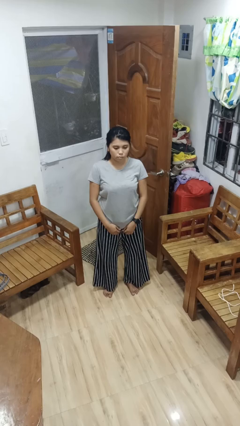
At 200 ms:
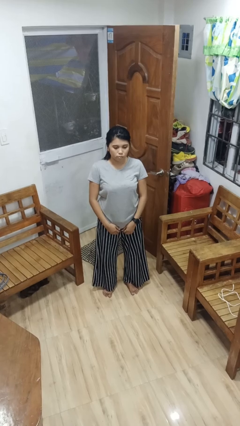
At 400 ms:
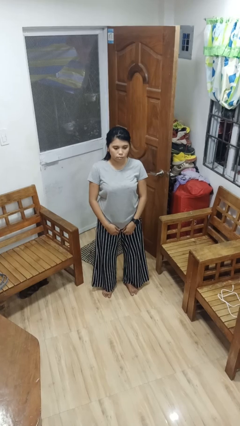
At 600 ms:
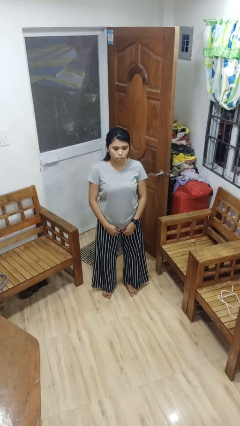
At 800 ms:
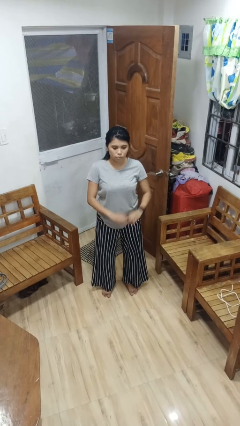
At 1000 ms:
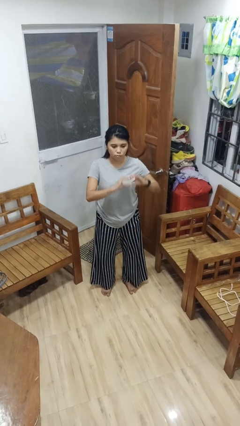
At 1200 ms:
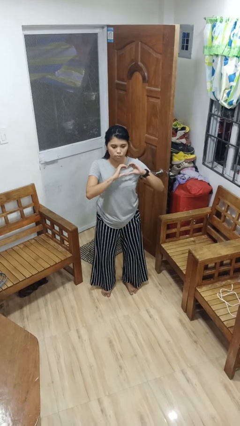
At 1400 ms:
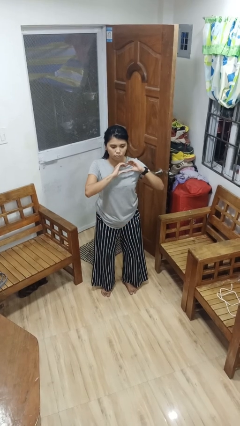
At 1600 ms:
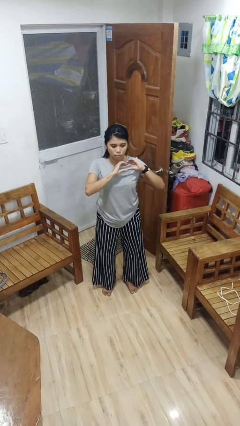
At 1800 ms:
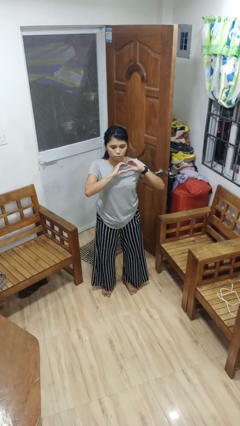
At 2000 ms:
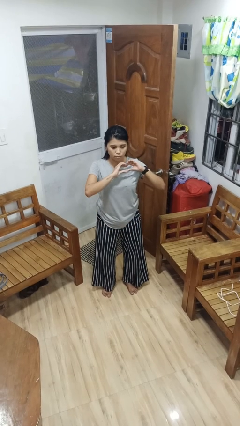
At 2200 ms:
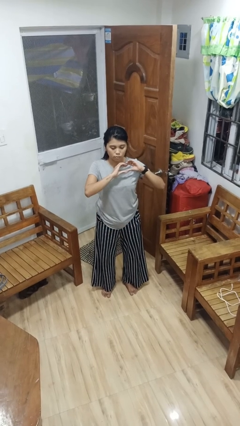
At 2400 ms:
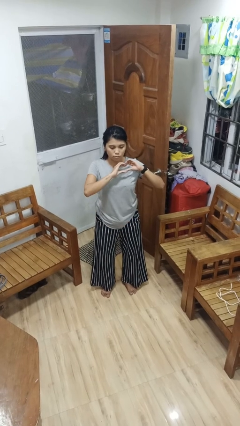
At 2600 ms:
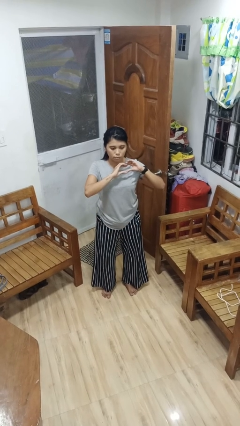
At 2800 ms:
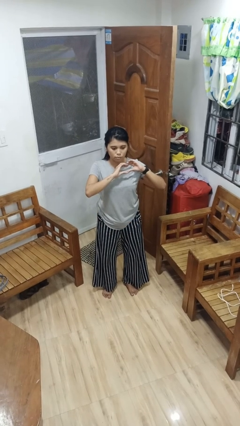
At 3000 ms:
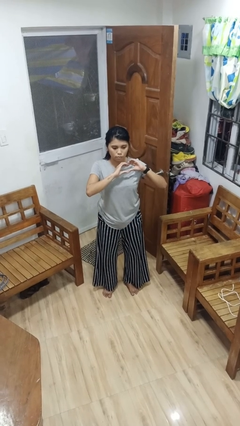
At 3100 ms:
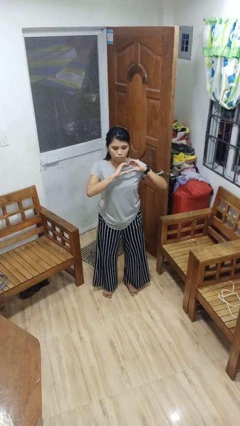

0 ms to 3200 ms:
person gestures heart

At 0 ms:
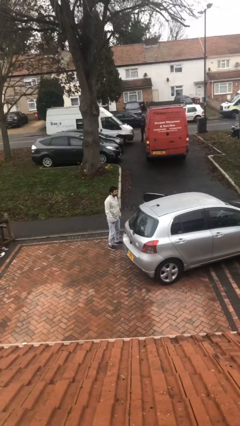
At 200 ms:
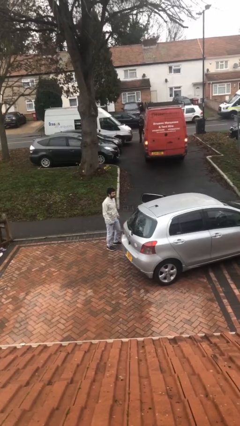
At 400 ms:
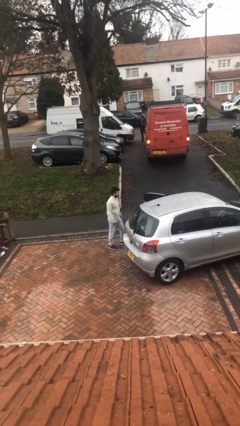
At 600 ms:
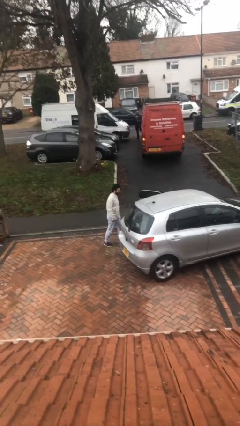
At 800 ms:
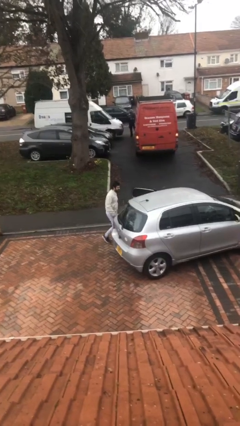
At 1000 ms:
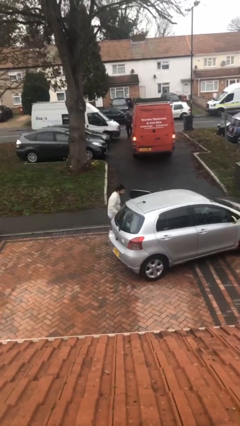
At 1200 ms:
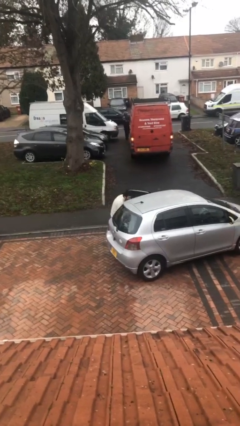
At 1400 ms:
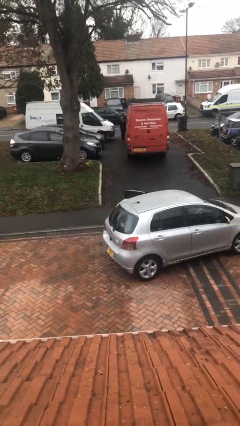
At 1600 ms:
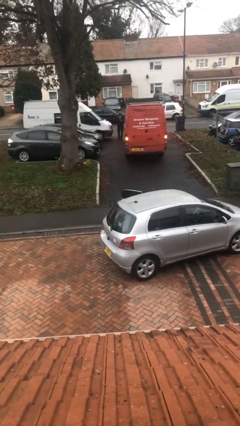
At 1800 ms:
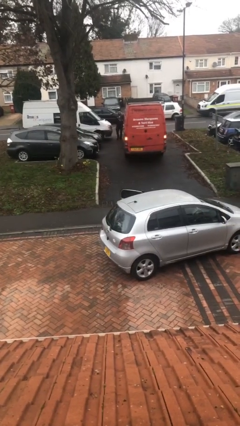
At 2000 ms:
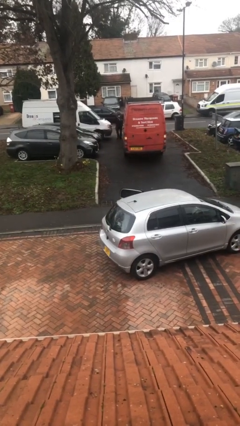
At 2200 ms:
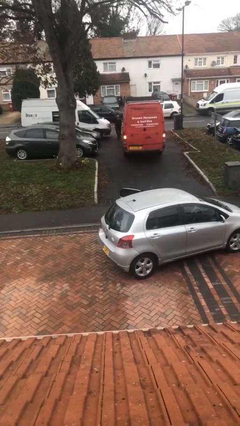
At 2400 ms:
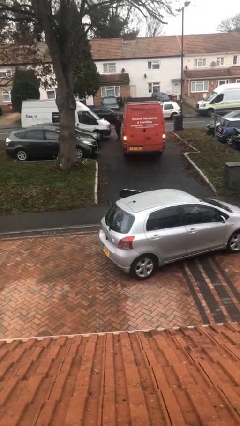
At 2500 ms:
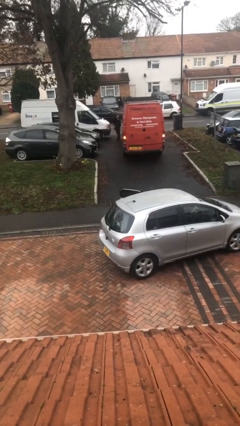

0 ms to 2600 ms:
person enters car

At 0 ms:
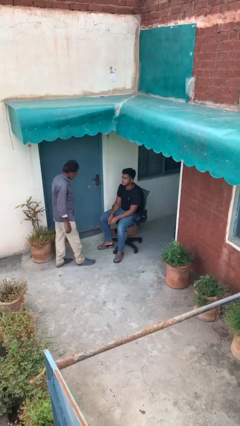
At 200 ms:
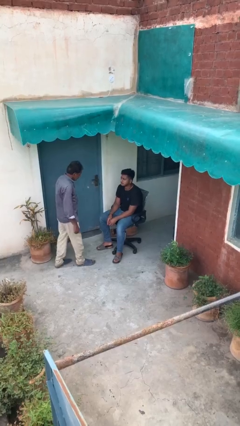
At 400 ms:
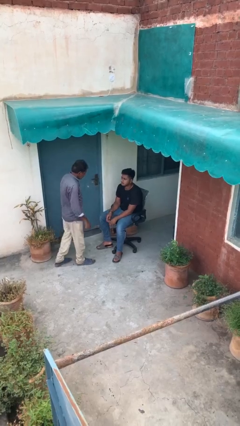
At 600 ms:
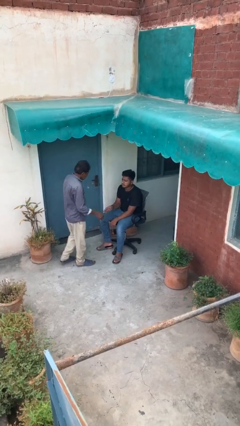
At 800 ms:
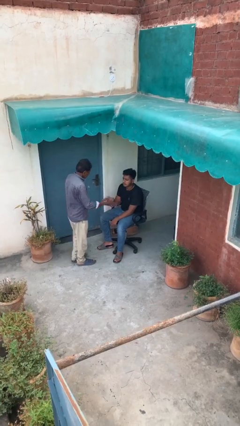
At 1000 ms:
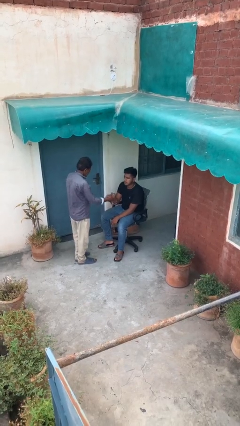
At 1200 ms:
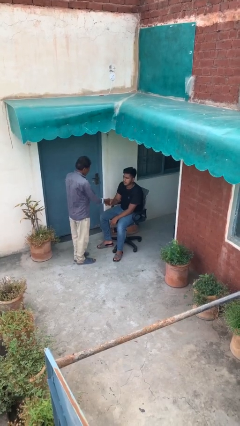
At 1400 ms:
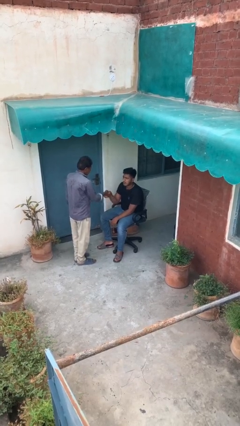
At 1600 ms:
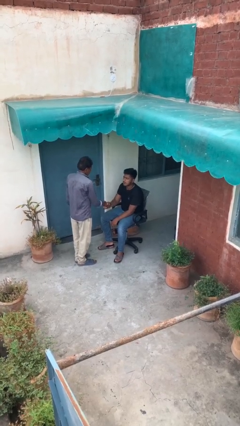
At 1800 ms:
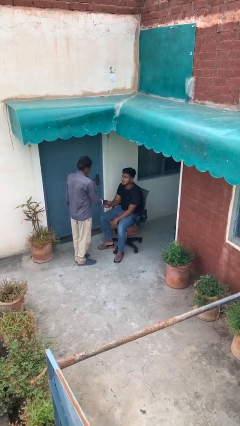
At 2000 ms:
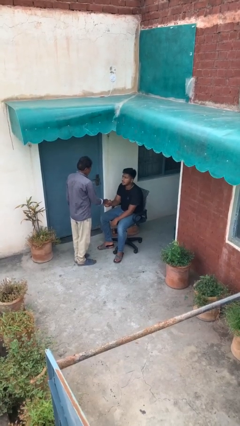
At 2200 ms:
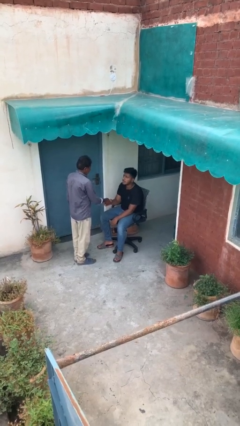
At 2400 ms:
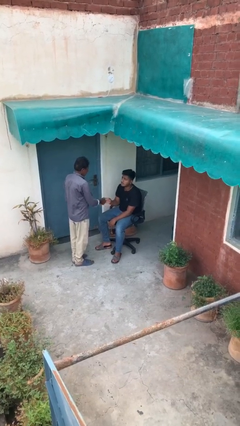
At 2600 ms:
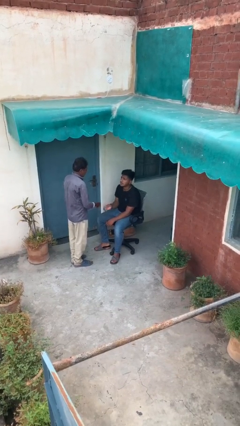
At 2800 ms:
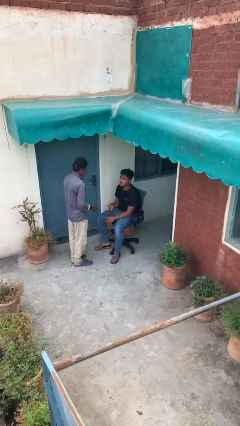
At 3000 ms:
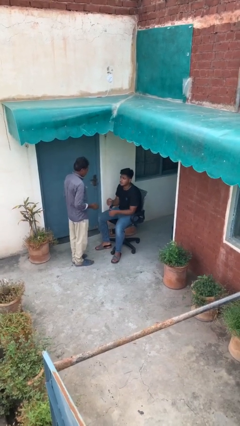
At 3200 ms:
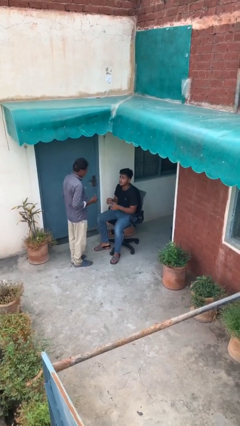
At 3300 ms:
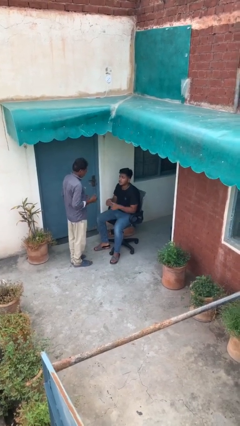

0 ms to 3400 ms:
person shakes hand

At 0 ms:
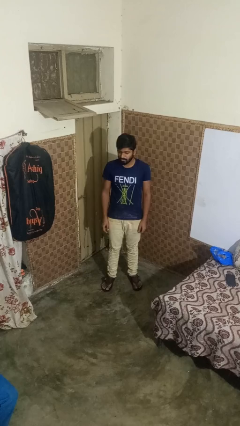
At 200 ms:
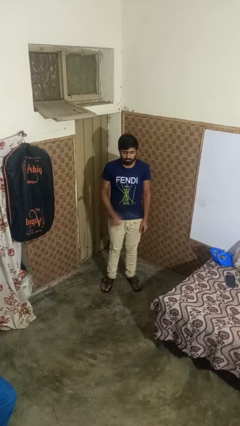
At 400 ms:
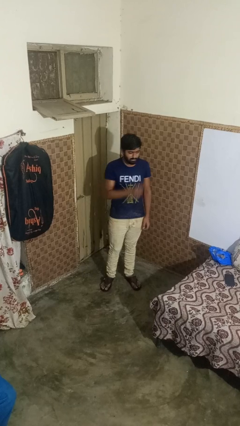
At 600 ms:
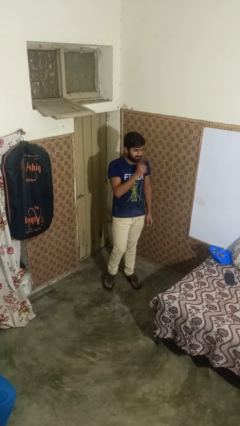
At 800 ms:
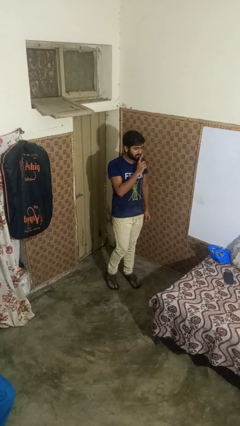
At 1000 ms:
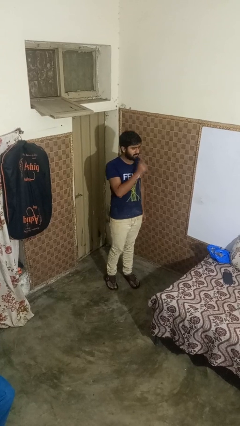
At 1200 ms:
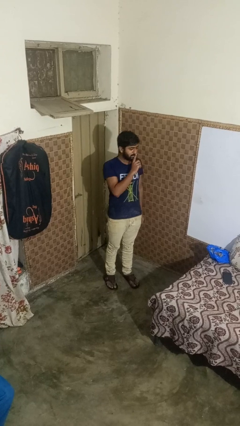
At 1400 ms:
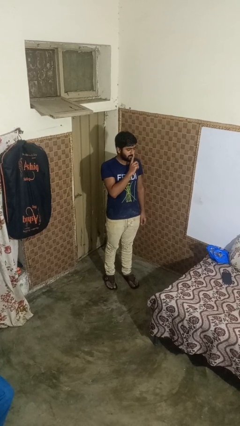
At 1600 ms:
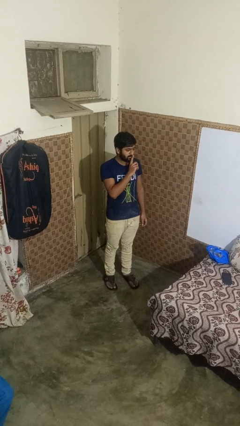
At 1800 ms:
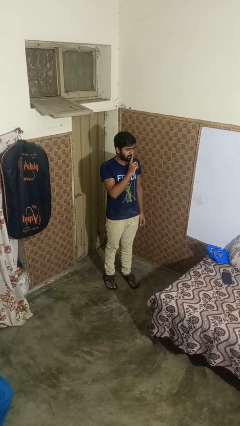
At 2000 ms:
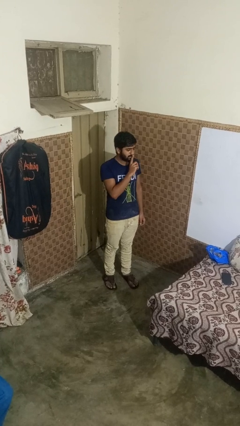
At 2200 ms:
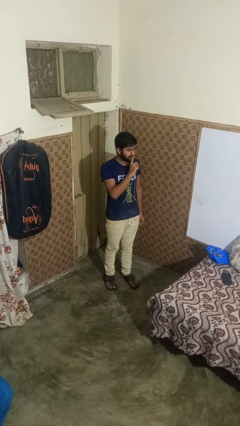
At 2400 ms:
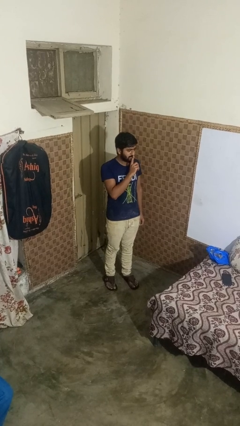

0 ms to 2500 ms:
person gestures be quiet

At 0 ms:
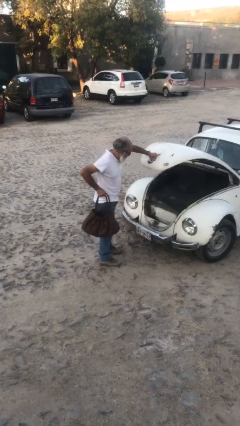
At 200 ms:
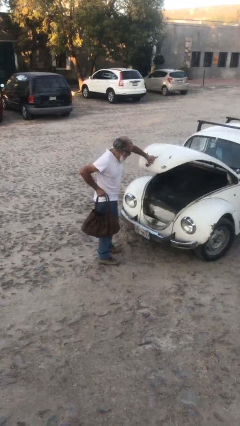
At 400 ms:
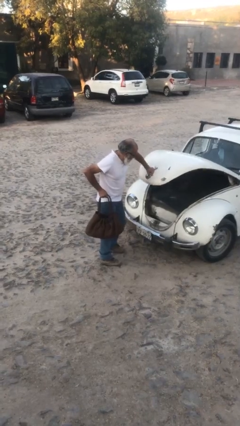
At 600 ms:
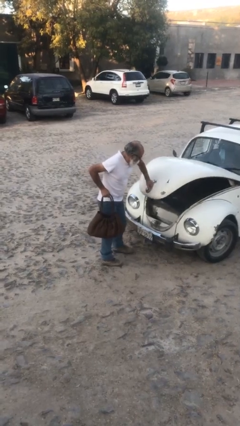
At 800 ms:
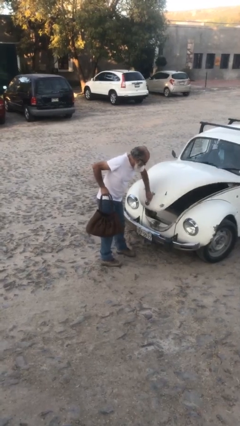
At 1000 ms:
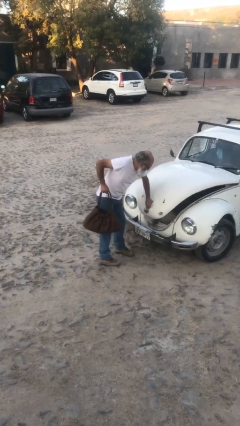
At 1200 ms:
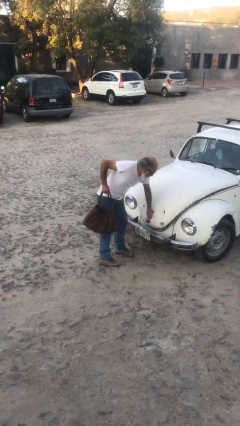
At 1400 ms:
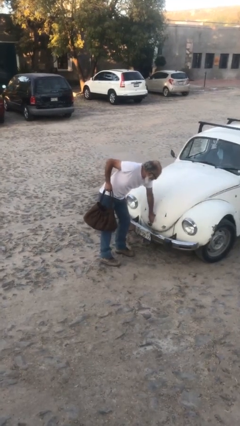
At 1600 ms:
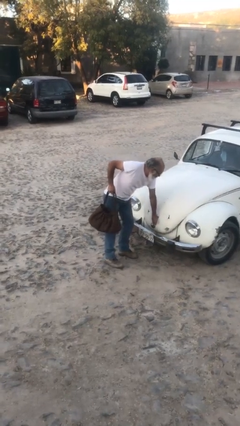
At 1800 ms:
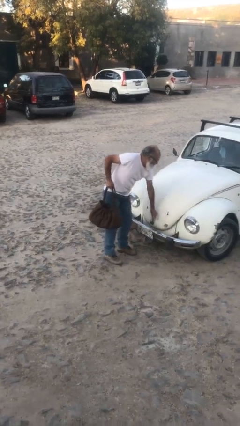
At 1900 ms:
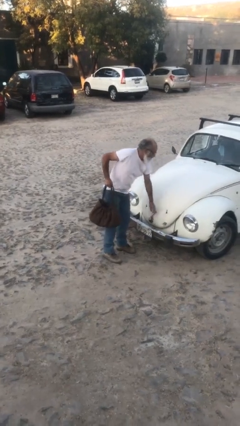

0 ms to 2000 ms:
person closes car trunk

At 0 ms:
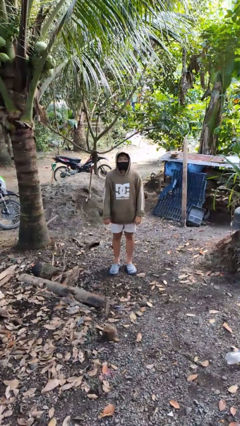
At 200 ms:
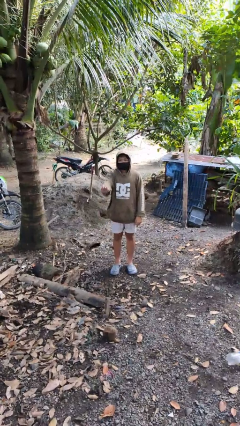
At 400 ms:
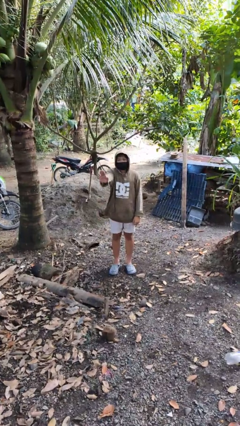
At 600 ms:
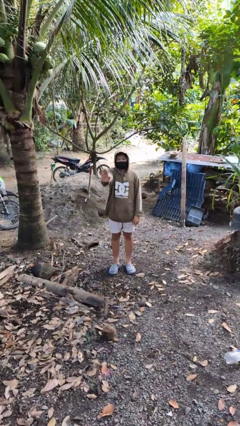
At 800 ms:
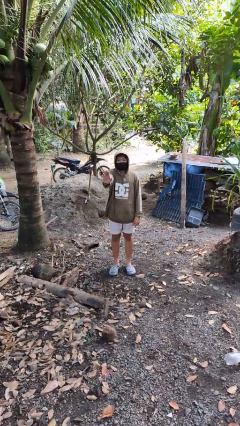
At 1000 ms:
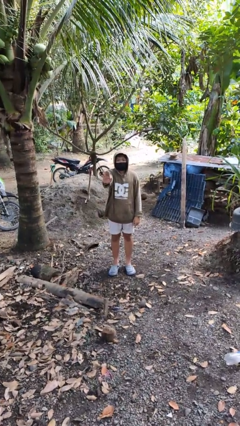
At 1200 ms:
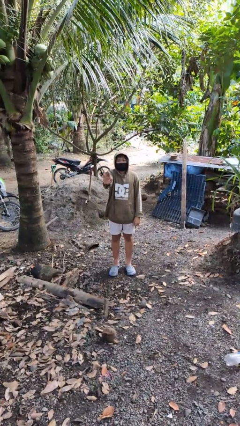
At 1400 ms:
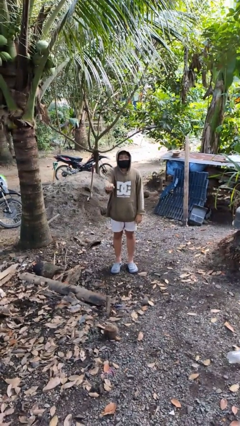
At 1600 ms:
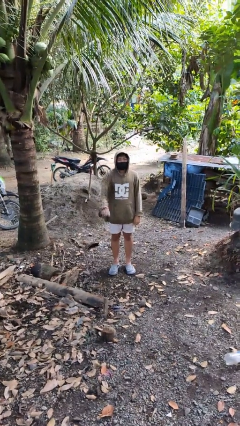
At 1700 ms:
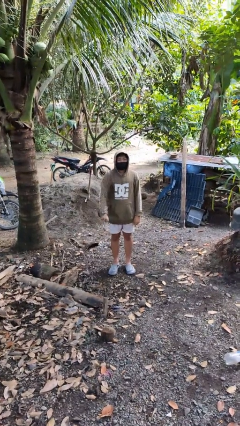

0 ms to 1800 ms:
person gestures stop

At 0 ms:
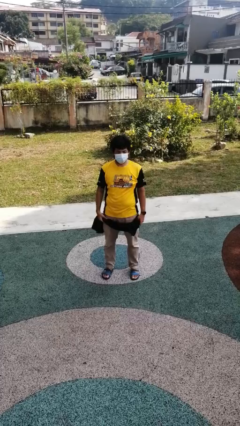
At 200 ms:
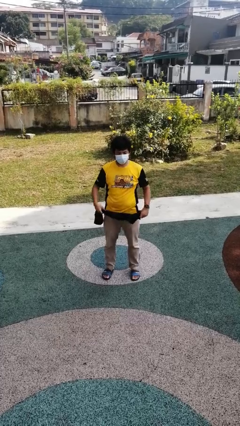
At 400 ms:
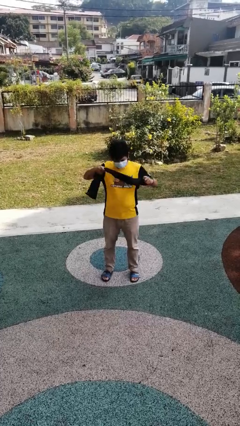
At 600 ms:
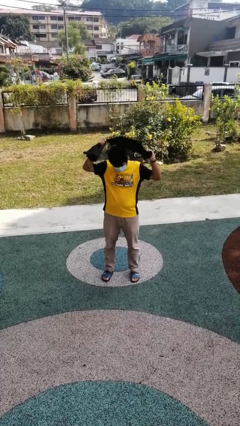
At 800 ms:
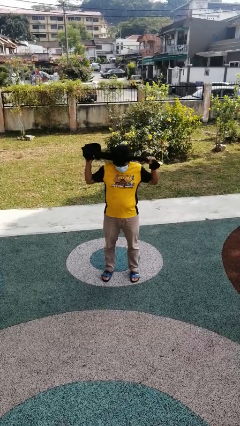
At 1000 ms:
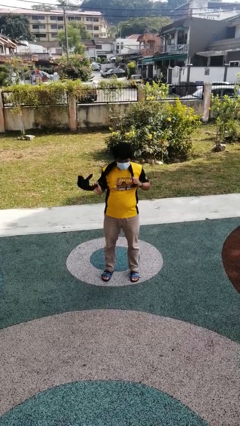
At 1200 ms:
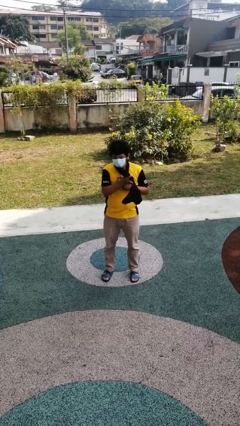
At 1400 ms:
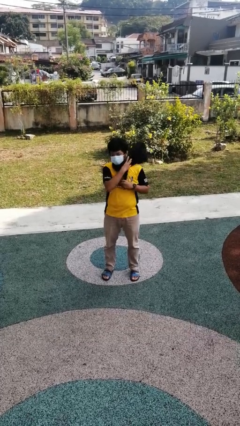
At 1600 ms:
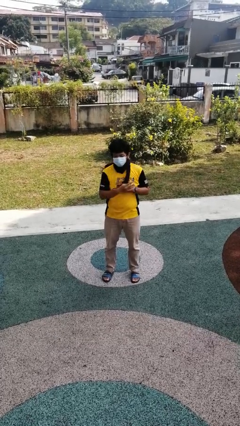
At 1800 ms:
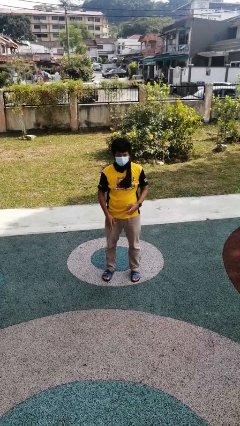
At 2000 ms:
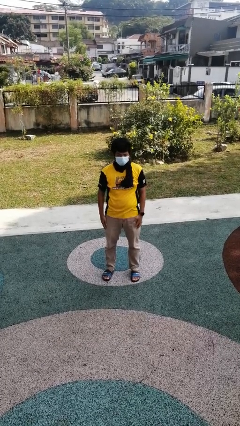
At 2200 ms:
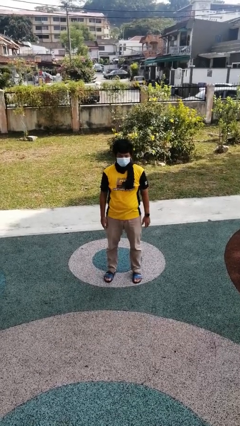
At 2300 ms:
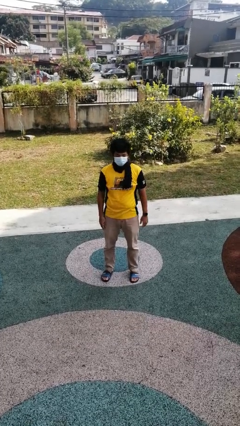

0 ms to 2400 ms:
person puts on scarf
